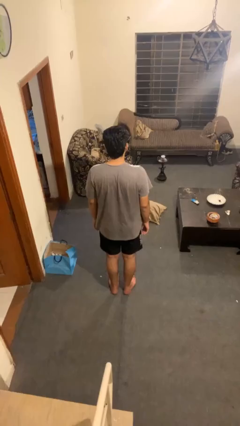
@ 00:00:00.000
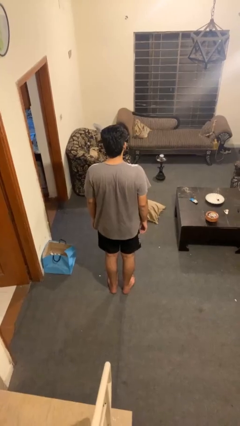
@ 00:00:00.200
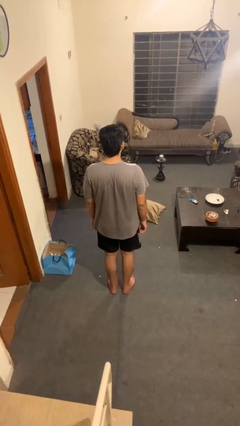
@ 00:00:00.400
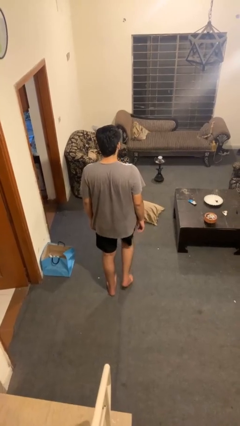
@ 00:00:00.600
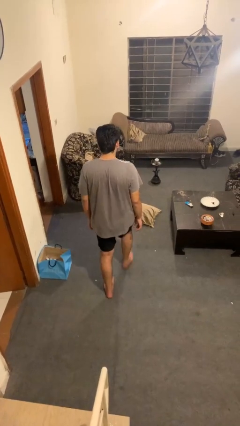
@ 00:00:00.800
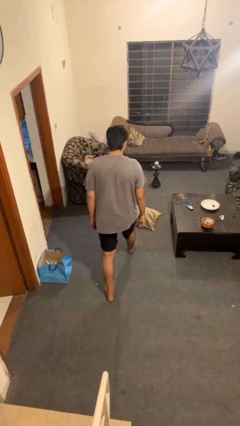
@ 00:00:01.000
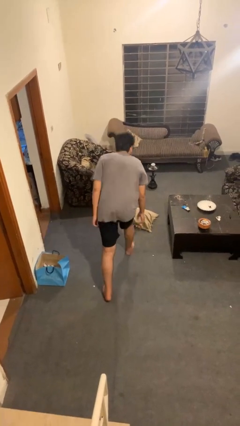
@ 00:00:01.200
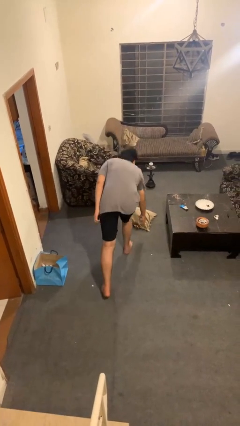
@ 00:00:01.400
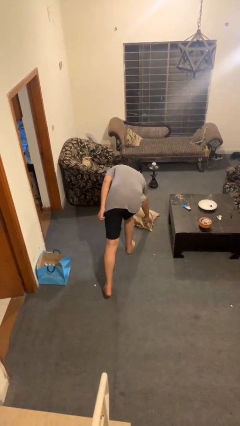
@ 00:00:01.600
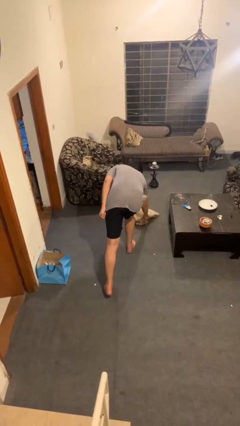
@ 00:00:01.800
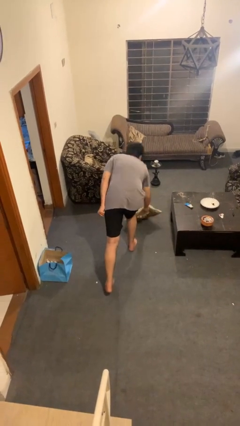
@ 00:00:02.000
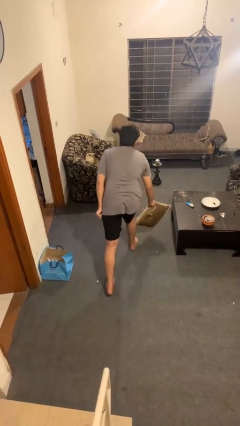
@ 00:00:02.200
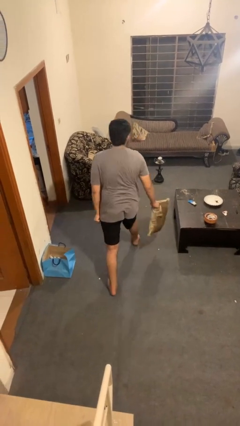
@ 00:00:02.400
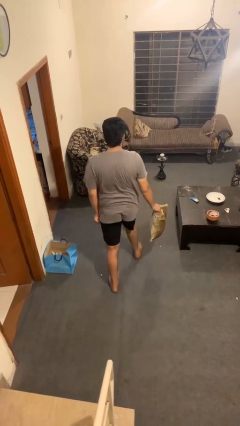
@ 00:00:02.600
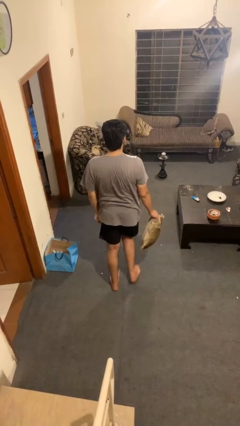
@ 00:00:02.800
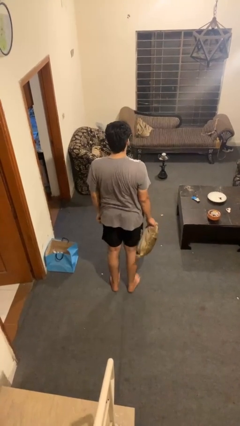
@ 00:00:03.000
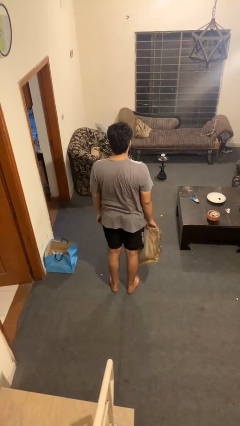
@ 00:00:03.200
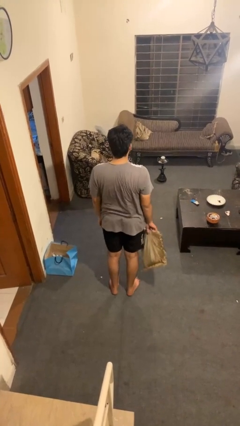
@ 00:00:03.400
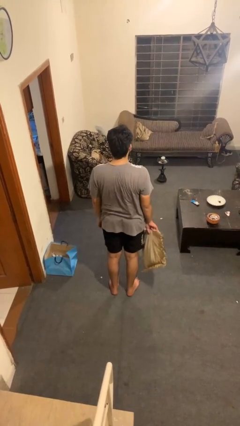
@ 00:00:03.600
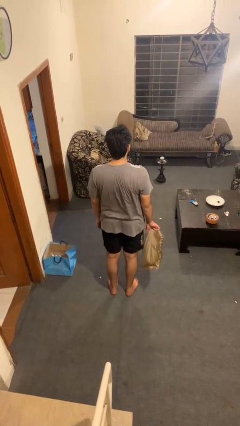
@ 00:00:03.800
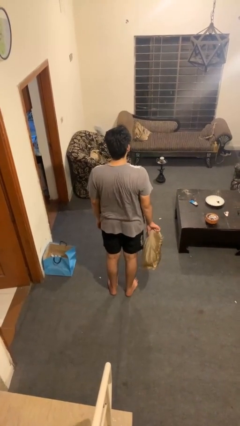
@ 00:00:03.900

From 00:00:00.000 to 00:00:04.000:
person picks up object from floor

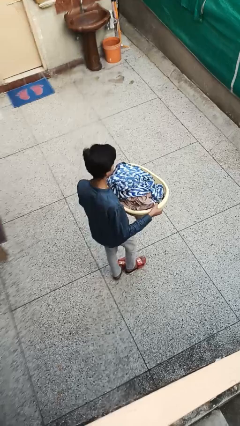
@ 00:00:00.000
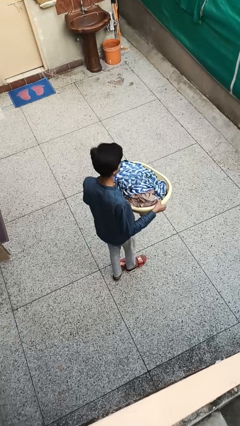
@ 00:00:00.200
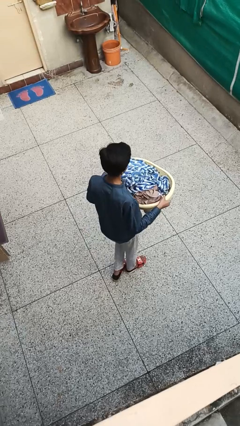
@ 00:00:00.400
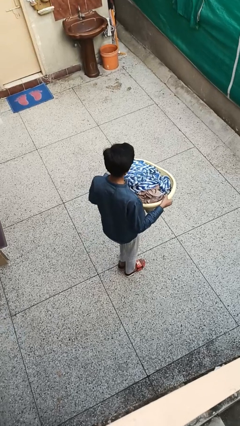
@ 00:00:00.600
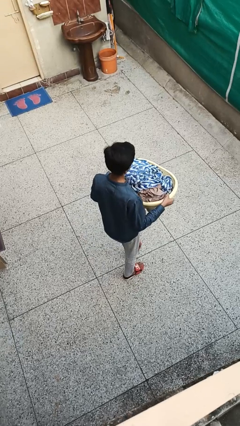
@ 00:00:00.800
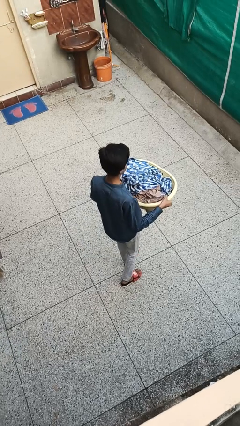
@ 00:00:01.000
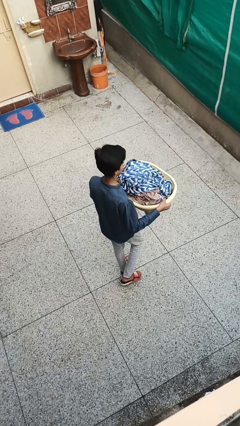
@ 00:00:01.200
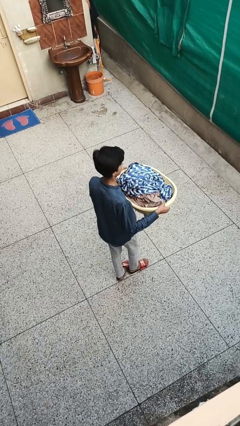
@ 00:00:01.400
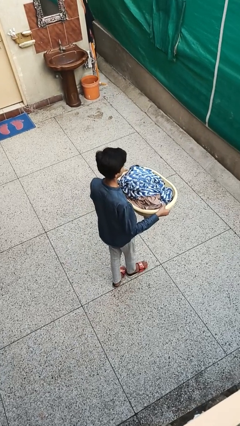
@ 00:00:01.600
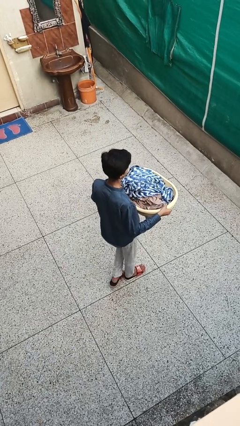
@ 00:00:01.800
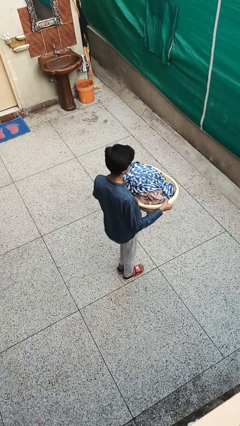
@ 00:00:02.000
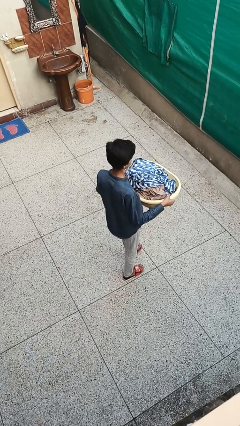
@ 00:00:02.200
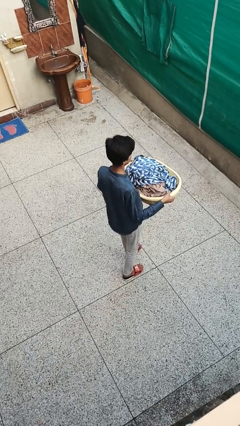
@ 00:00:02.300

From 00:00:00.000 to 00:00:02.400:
person carries laundry basket

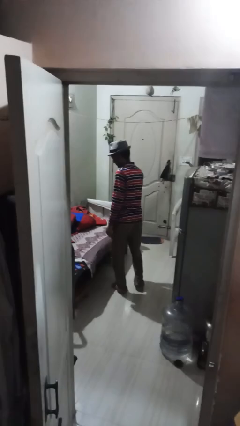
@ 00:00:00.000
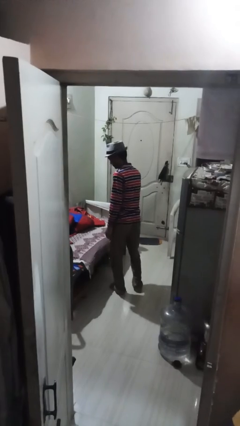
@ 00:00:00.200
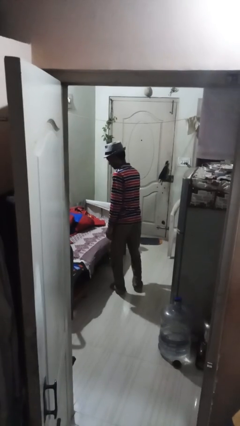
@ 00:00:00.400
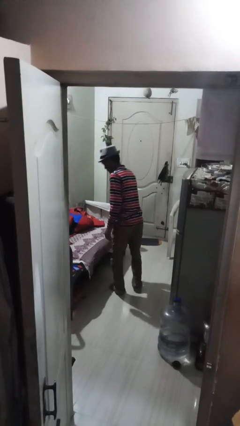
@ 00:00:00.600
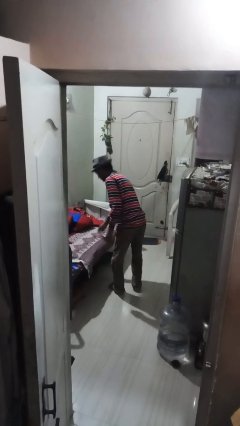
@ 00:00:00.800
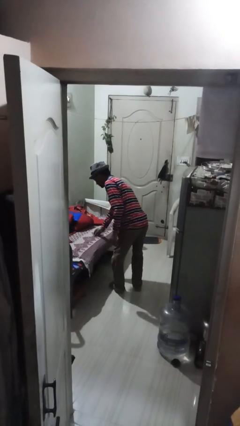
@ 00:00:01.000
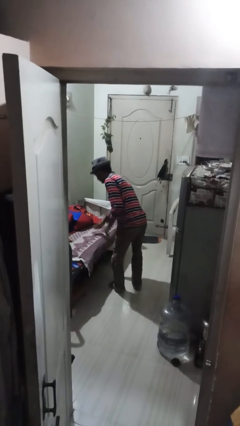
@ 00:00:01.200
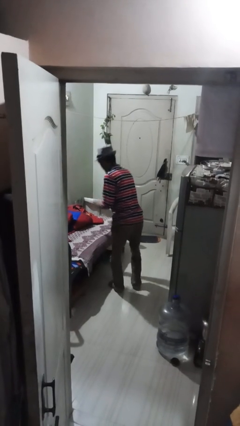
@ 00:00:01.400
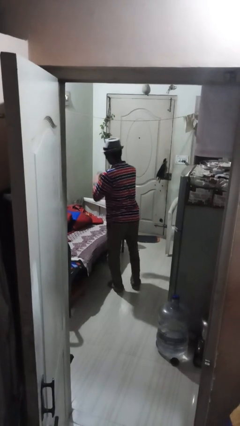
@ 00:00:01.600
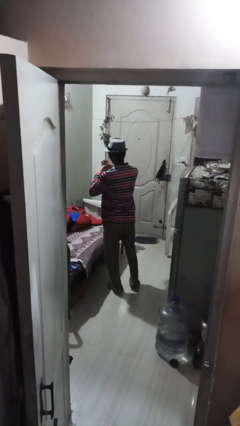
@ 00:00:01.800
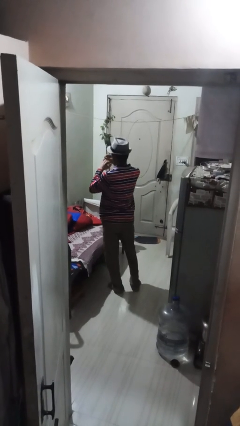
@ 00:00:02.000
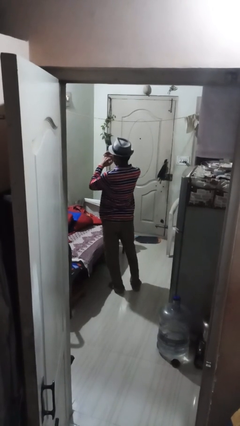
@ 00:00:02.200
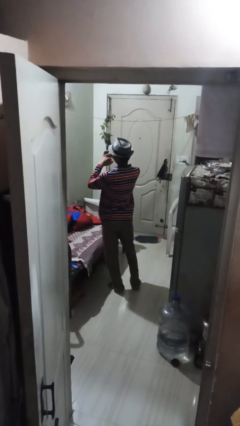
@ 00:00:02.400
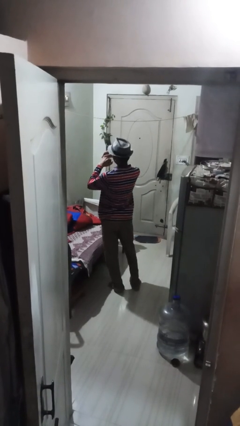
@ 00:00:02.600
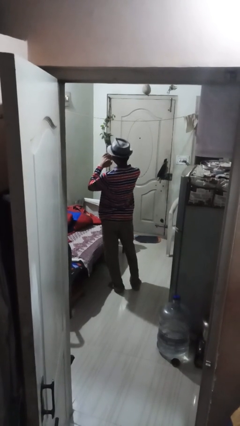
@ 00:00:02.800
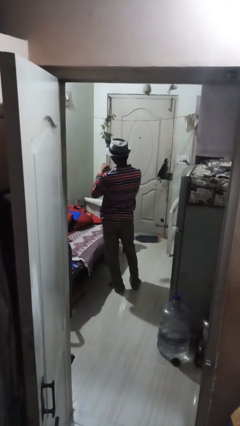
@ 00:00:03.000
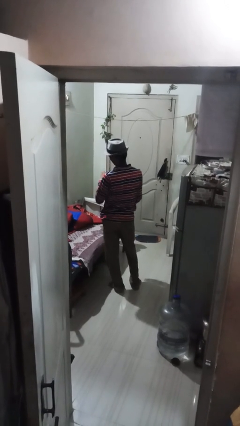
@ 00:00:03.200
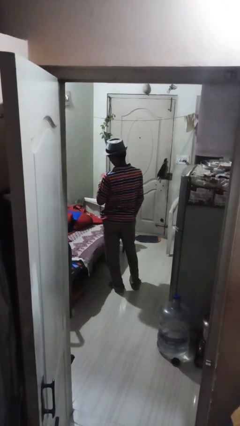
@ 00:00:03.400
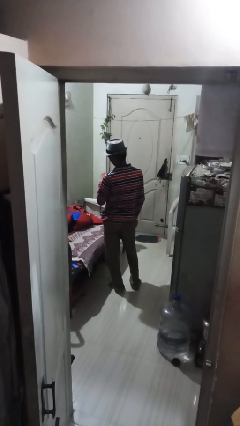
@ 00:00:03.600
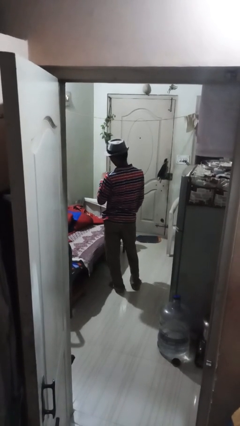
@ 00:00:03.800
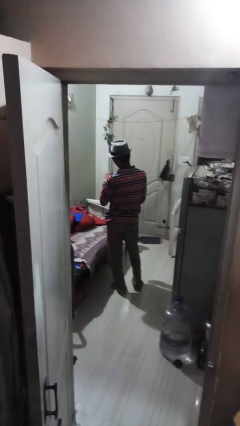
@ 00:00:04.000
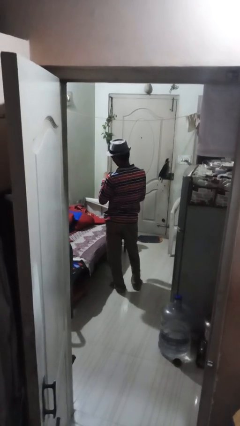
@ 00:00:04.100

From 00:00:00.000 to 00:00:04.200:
person puts on ring

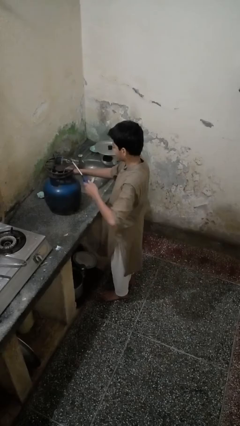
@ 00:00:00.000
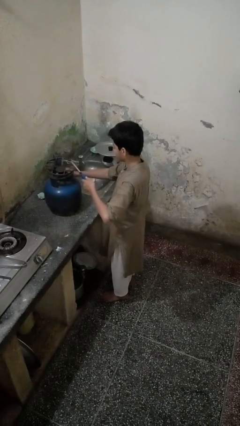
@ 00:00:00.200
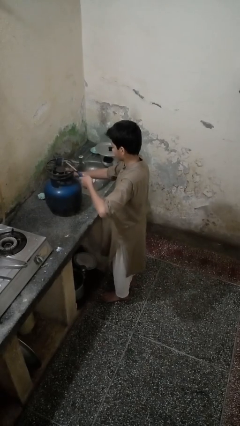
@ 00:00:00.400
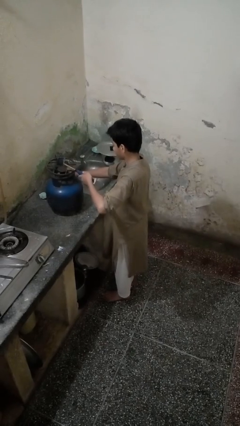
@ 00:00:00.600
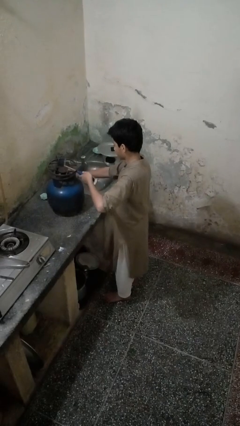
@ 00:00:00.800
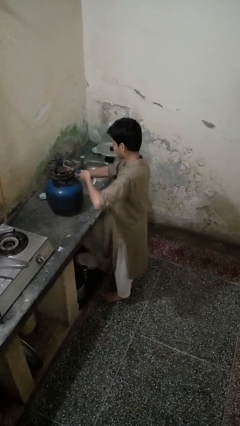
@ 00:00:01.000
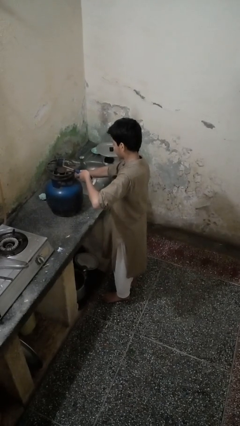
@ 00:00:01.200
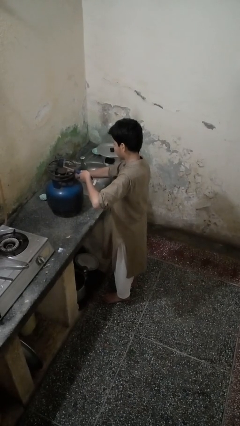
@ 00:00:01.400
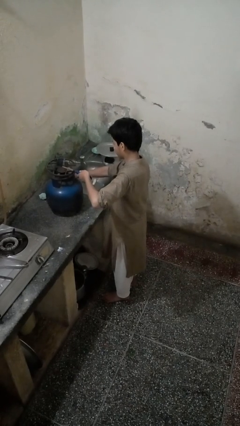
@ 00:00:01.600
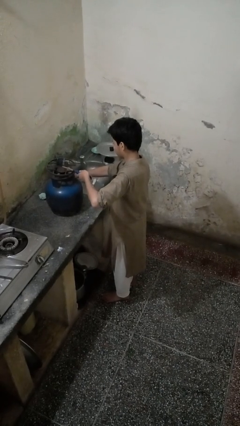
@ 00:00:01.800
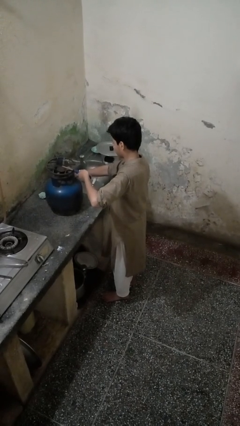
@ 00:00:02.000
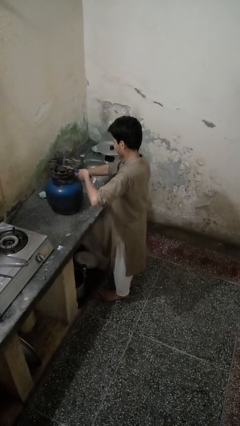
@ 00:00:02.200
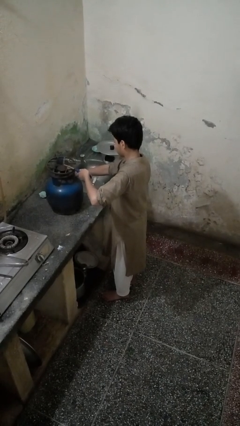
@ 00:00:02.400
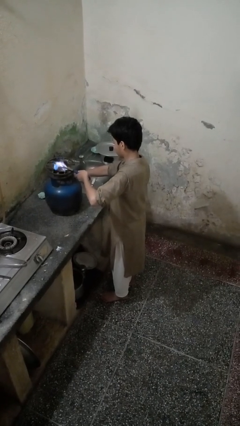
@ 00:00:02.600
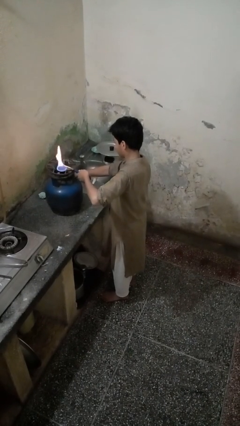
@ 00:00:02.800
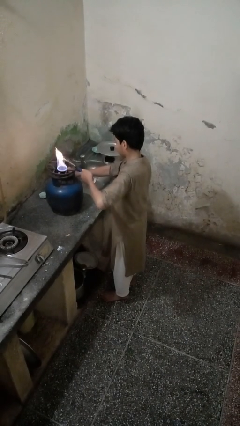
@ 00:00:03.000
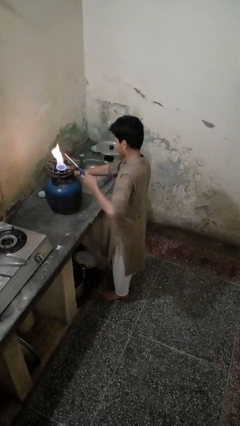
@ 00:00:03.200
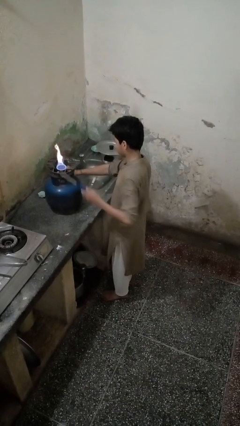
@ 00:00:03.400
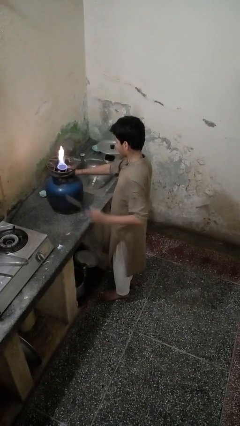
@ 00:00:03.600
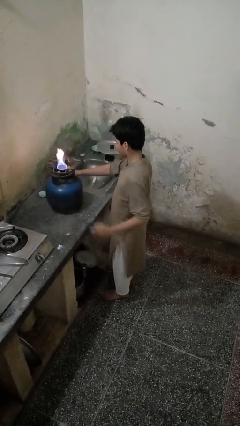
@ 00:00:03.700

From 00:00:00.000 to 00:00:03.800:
person turns on stovetop

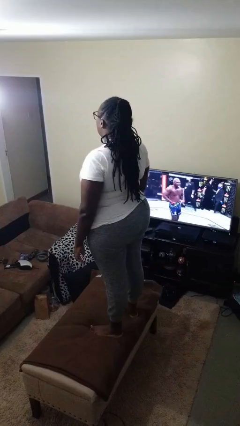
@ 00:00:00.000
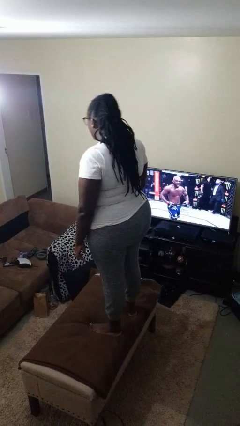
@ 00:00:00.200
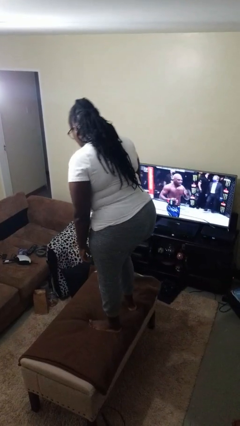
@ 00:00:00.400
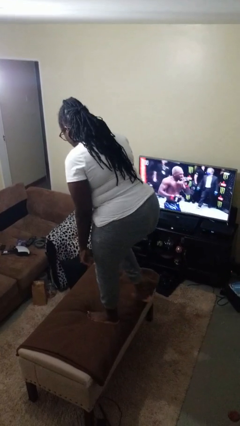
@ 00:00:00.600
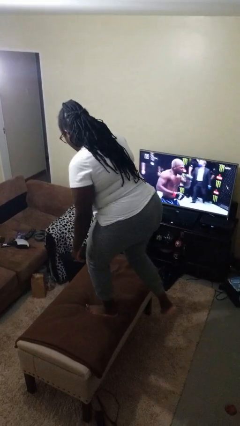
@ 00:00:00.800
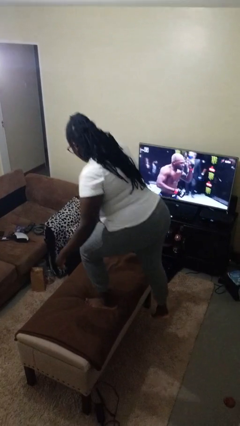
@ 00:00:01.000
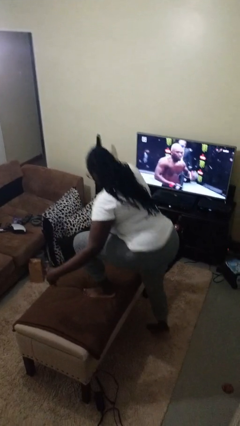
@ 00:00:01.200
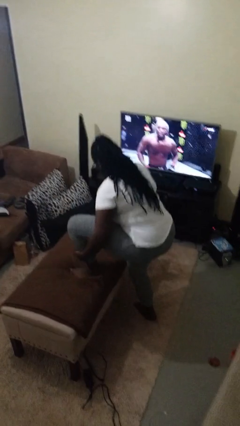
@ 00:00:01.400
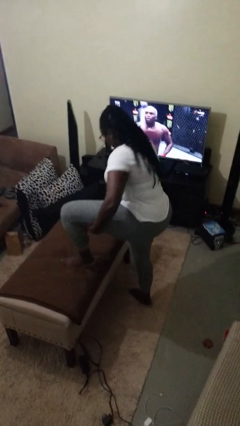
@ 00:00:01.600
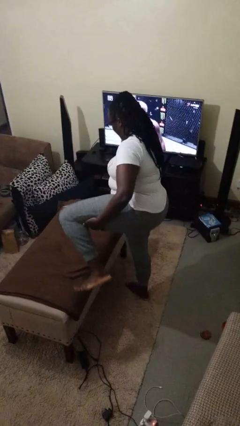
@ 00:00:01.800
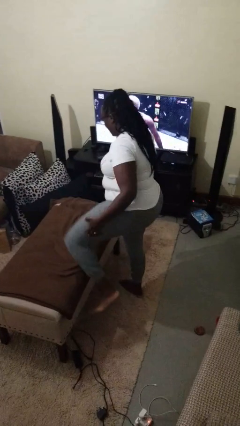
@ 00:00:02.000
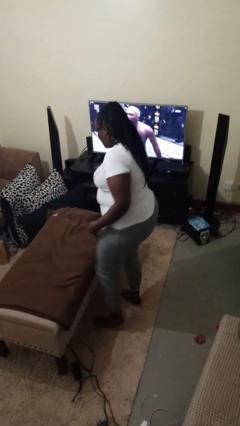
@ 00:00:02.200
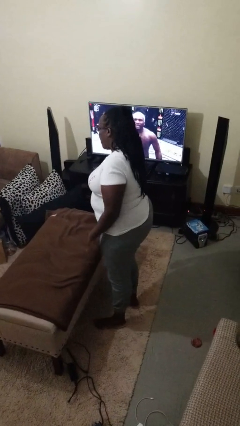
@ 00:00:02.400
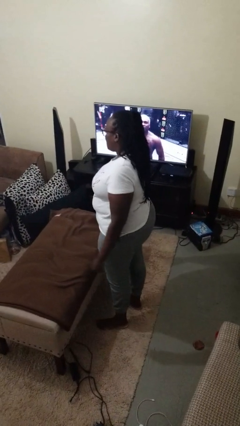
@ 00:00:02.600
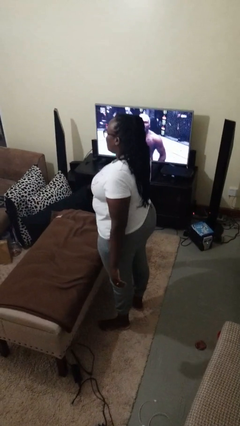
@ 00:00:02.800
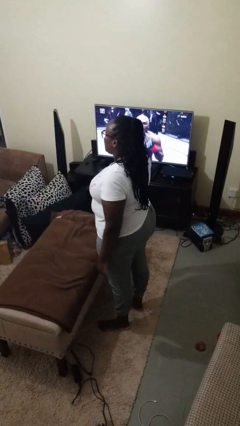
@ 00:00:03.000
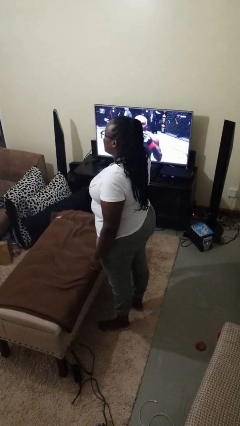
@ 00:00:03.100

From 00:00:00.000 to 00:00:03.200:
person climbs off table
